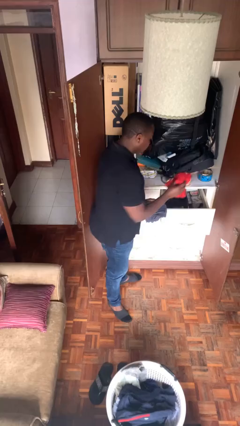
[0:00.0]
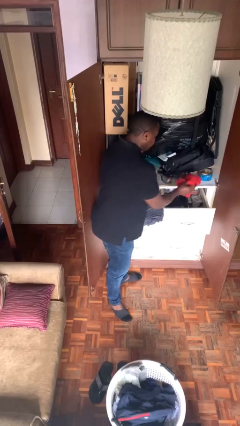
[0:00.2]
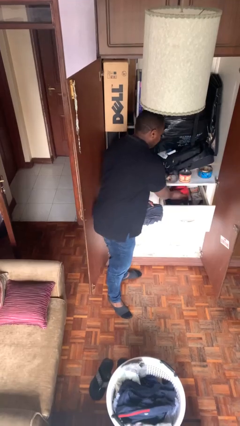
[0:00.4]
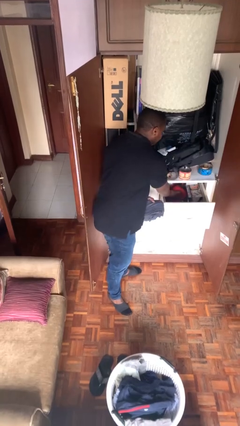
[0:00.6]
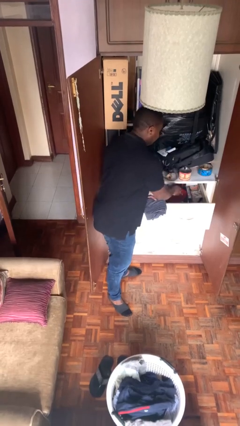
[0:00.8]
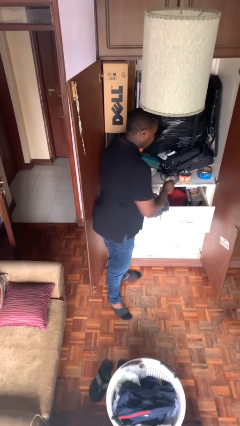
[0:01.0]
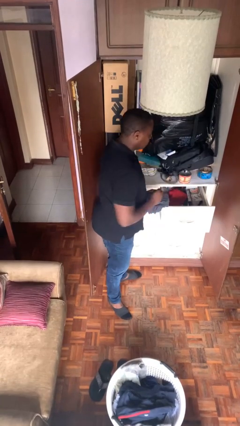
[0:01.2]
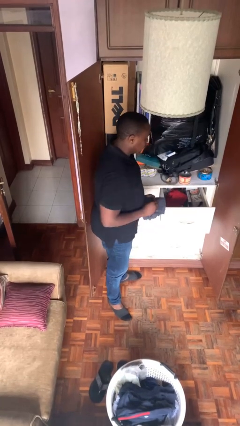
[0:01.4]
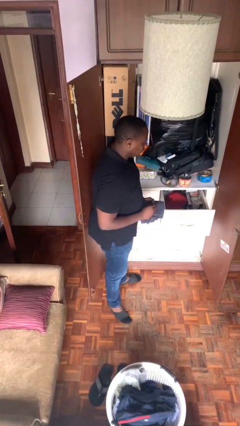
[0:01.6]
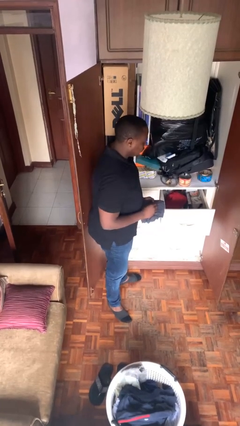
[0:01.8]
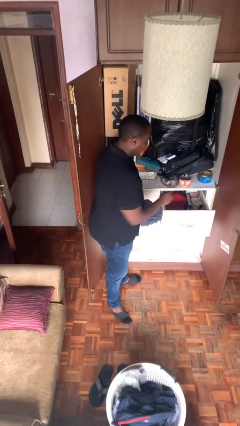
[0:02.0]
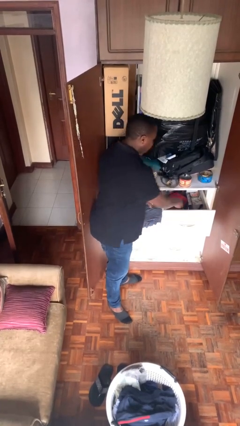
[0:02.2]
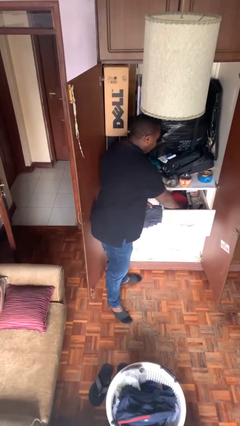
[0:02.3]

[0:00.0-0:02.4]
person puts clothes into dresser

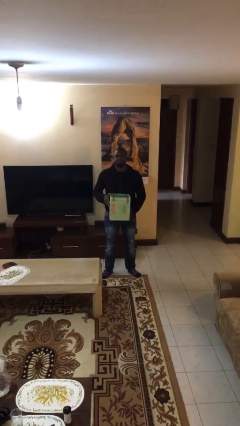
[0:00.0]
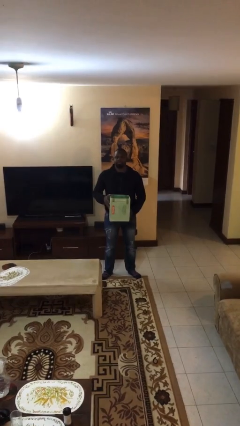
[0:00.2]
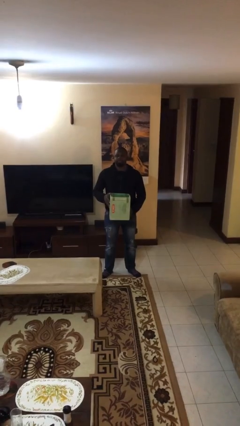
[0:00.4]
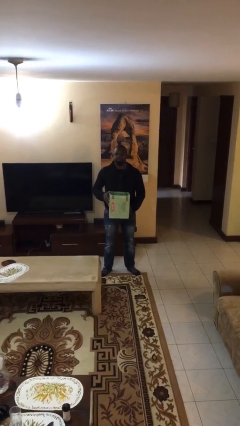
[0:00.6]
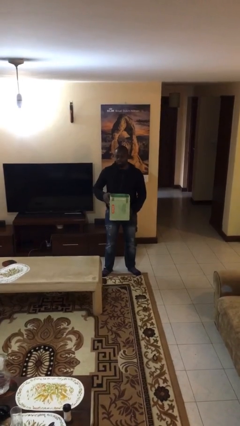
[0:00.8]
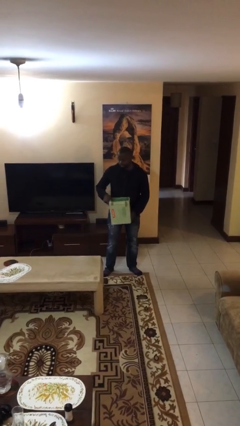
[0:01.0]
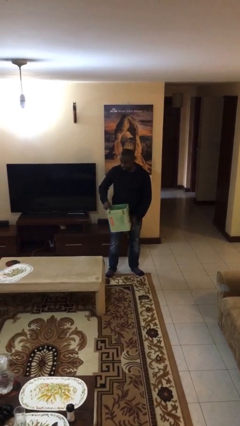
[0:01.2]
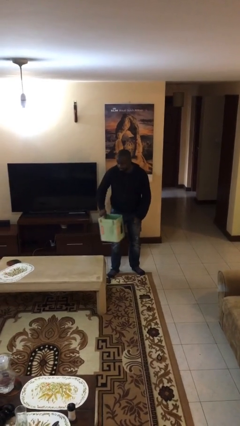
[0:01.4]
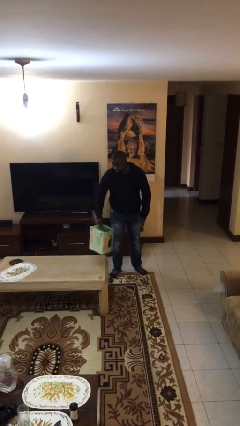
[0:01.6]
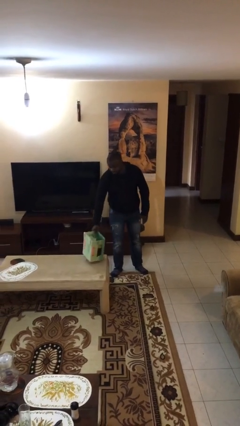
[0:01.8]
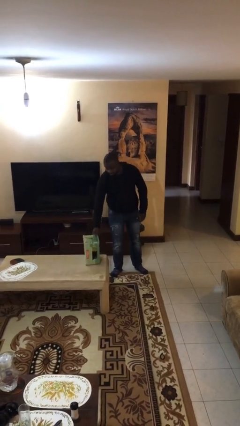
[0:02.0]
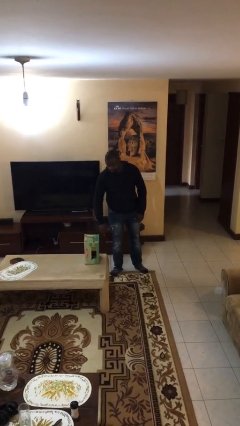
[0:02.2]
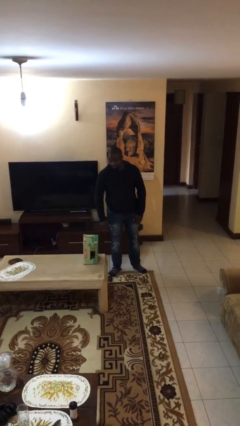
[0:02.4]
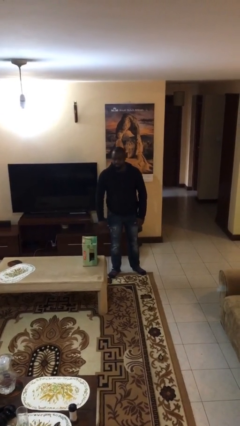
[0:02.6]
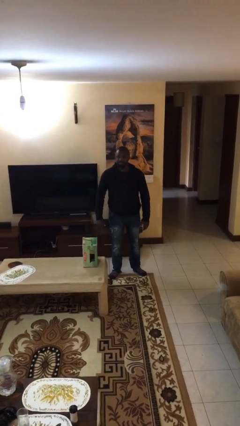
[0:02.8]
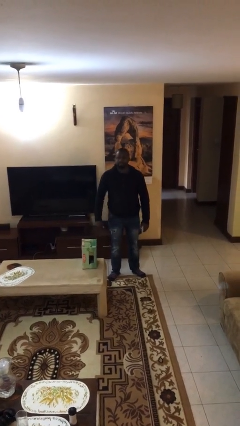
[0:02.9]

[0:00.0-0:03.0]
person puts down object on table

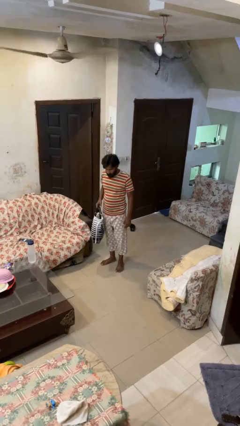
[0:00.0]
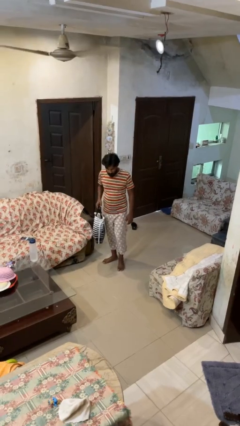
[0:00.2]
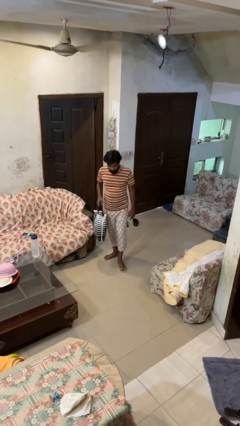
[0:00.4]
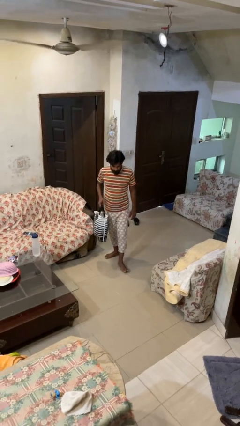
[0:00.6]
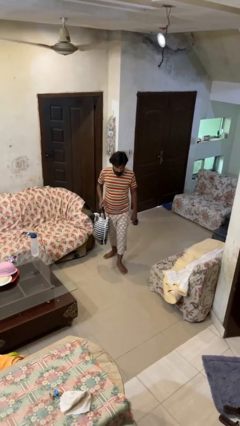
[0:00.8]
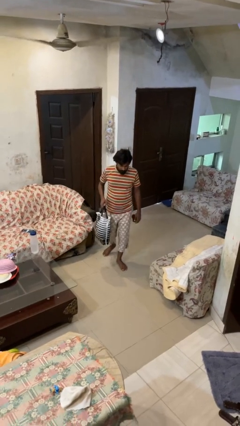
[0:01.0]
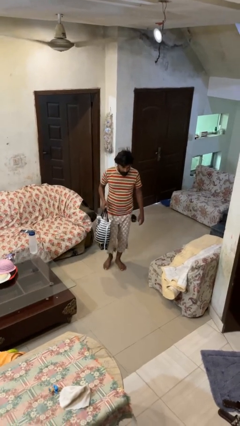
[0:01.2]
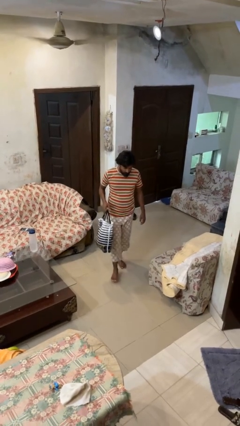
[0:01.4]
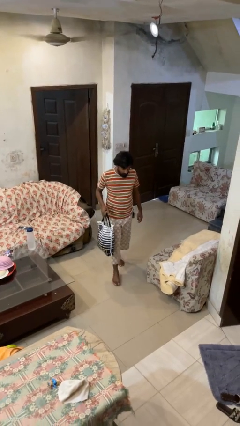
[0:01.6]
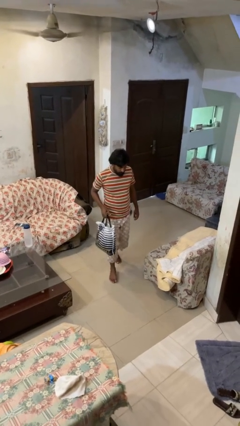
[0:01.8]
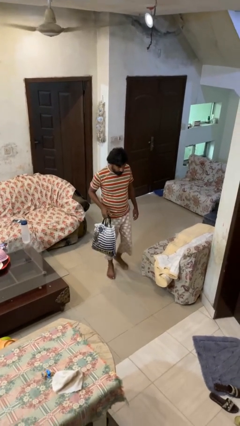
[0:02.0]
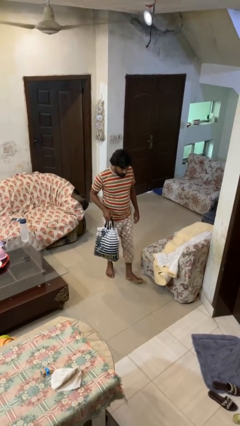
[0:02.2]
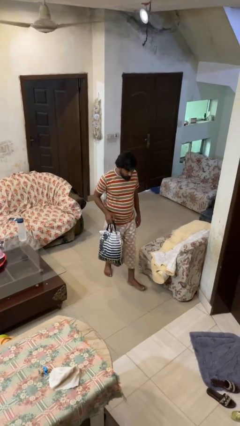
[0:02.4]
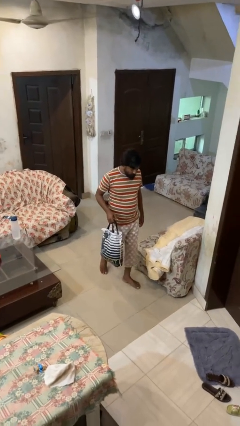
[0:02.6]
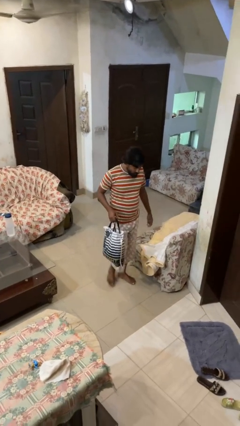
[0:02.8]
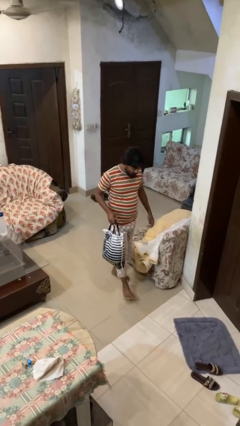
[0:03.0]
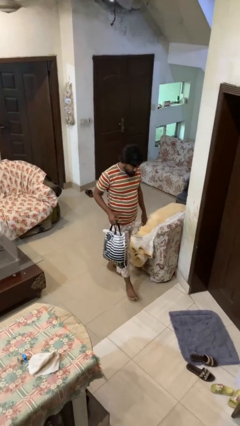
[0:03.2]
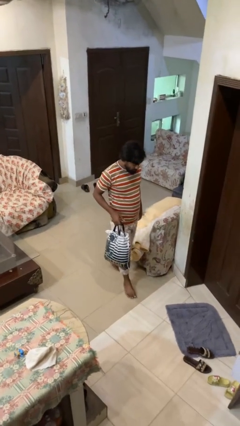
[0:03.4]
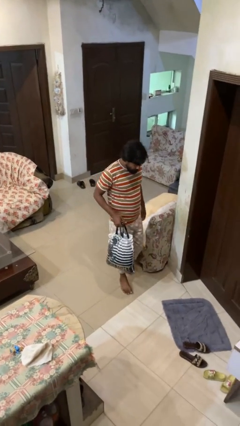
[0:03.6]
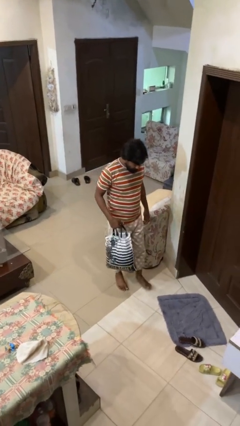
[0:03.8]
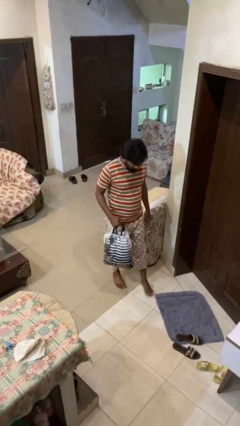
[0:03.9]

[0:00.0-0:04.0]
person carries groceries

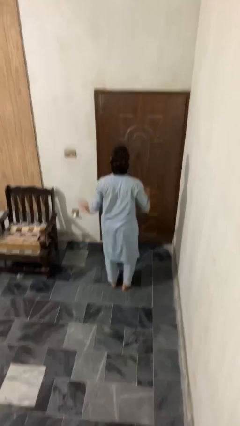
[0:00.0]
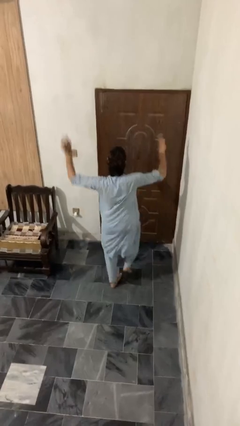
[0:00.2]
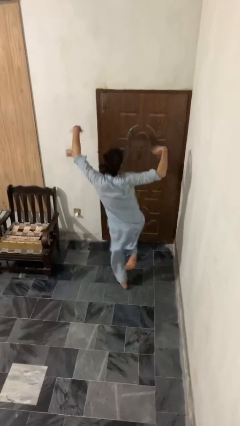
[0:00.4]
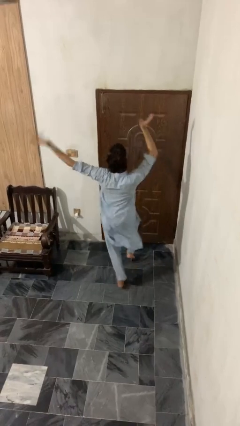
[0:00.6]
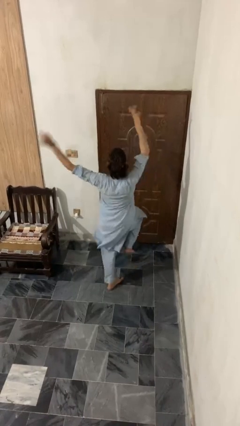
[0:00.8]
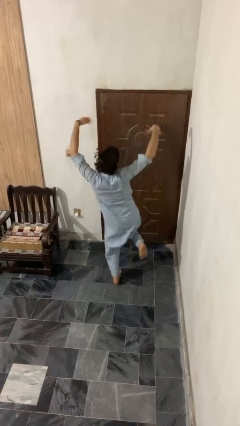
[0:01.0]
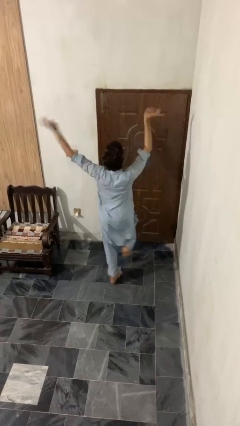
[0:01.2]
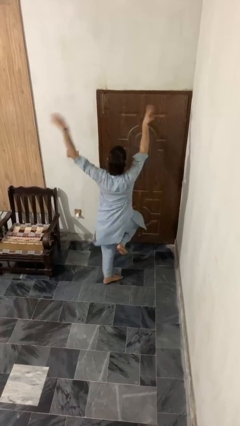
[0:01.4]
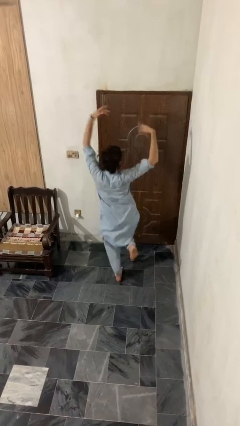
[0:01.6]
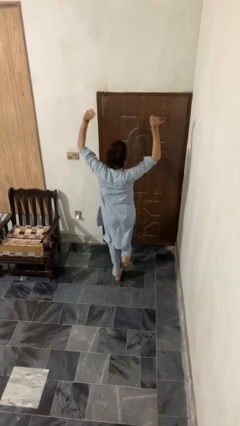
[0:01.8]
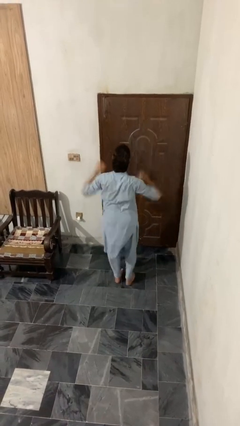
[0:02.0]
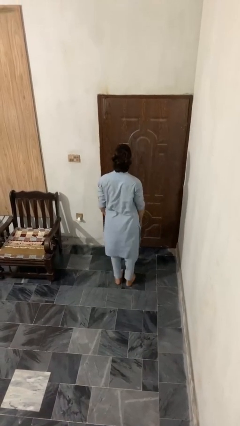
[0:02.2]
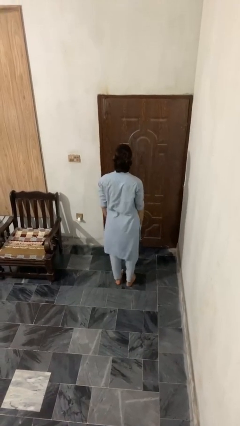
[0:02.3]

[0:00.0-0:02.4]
person dances in place

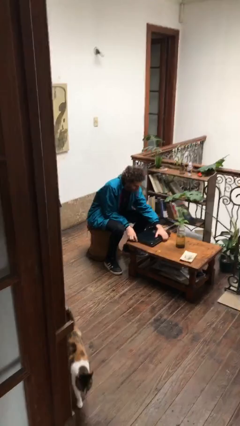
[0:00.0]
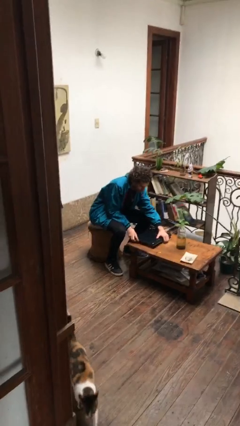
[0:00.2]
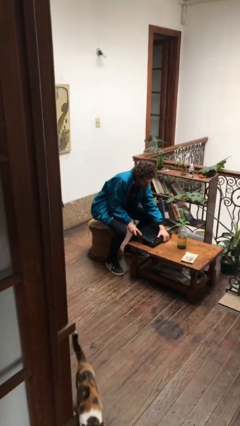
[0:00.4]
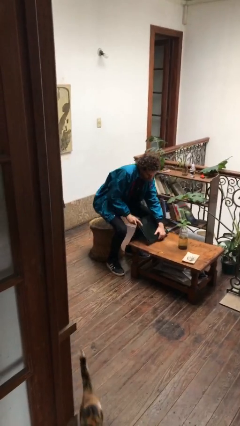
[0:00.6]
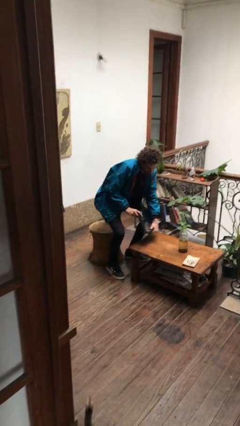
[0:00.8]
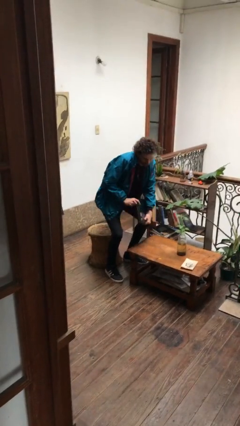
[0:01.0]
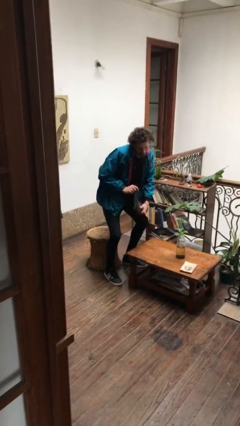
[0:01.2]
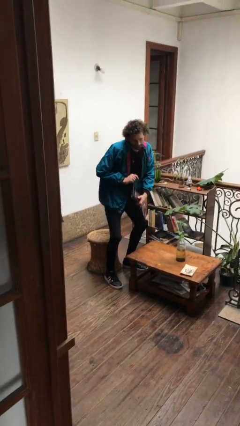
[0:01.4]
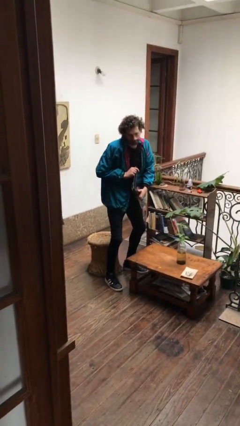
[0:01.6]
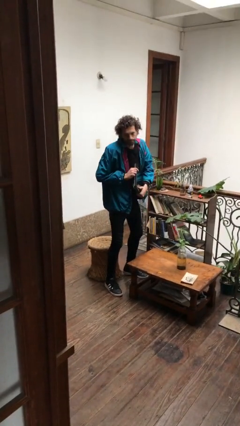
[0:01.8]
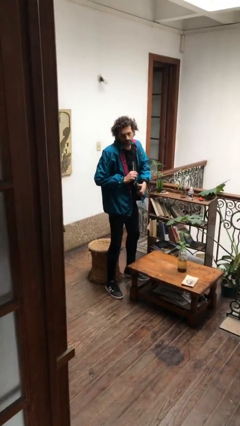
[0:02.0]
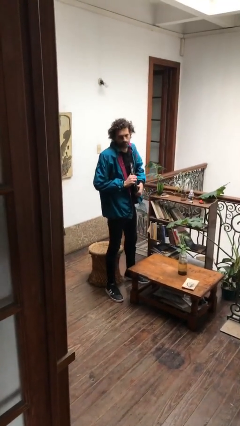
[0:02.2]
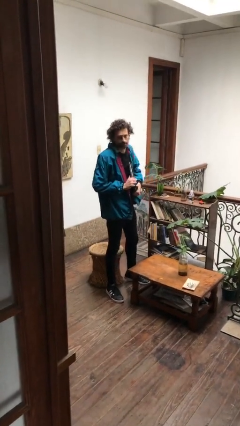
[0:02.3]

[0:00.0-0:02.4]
person stands up

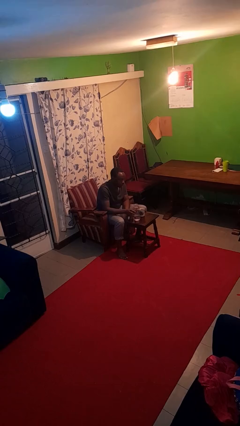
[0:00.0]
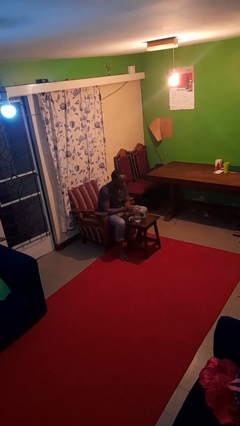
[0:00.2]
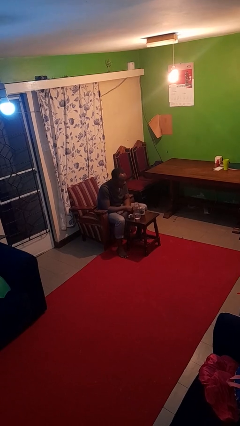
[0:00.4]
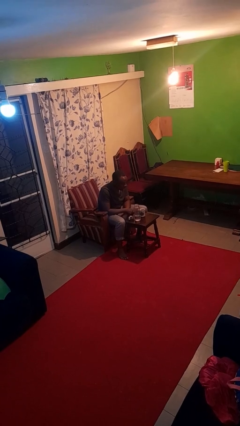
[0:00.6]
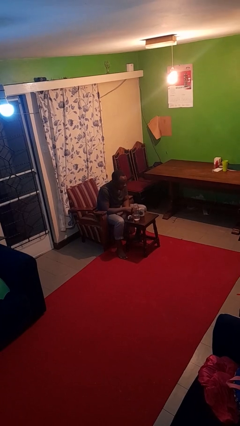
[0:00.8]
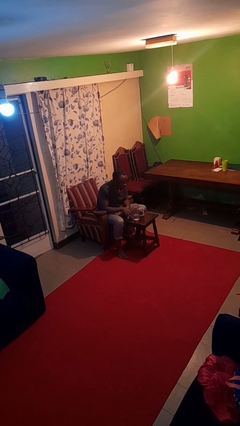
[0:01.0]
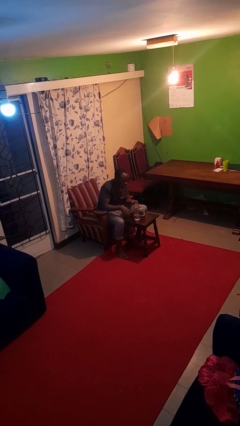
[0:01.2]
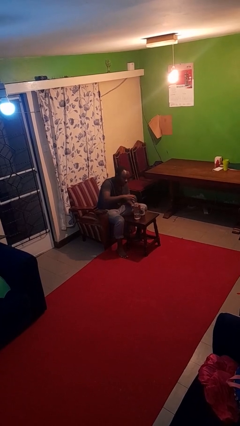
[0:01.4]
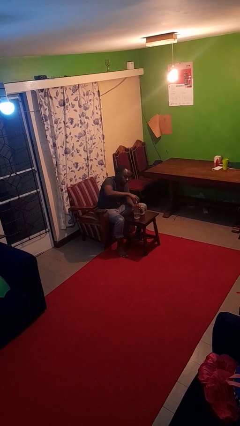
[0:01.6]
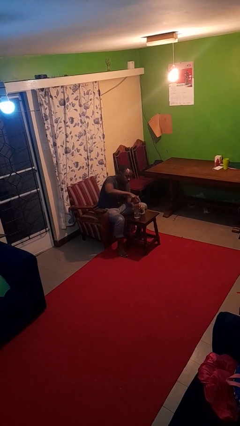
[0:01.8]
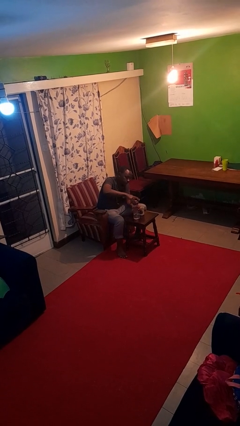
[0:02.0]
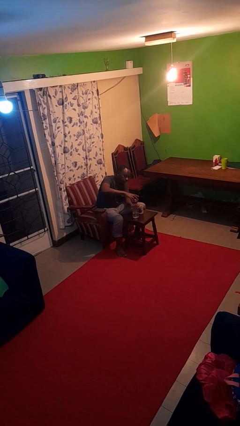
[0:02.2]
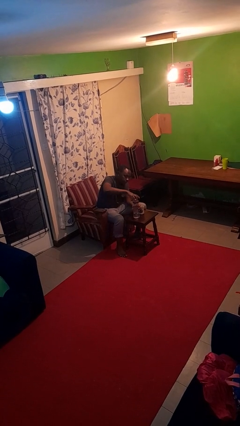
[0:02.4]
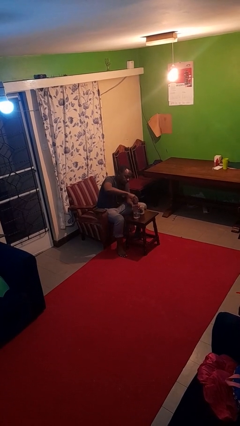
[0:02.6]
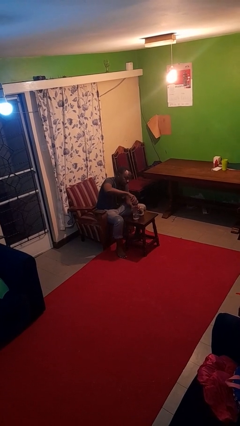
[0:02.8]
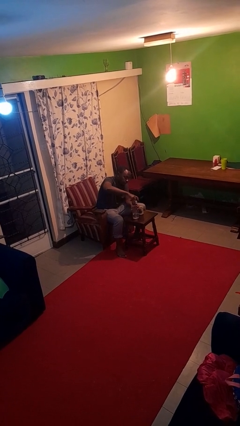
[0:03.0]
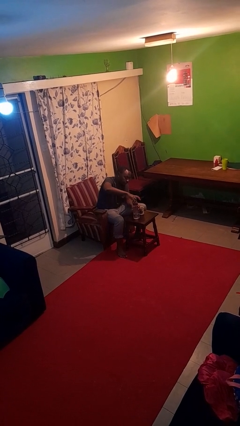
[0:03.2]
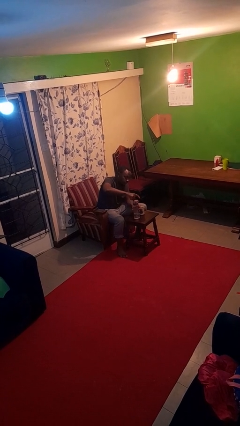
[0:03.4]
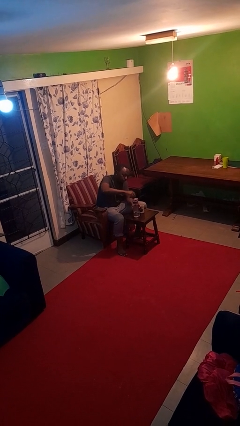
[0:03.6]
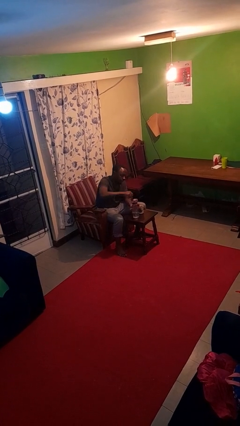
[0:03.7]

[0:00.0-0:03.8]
person screws lid to bottle
